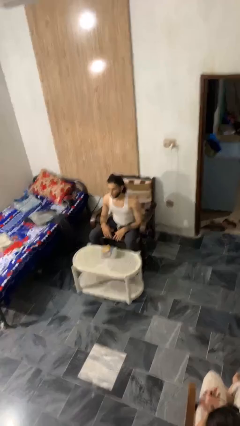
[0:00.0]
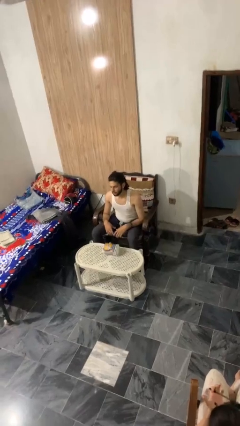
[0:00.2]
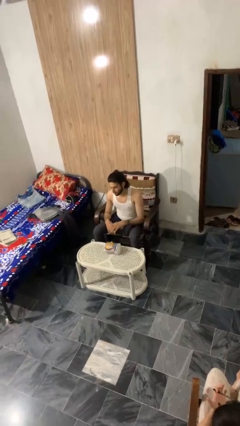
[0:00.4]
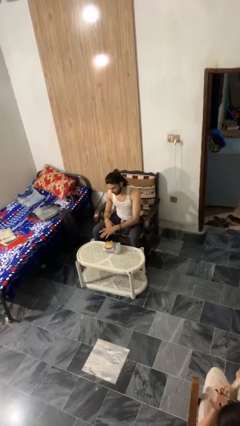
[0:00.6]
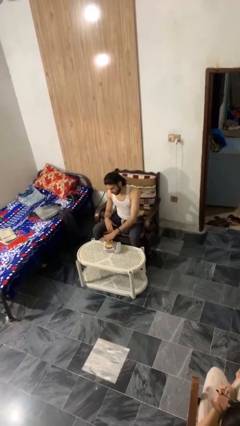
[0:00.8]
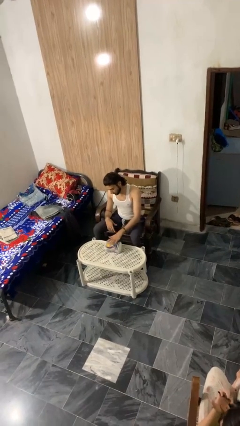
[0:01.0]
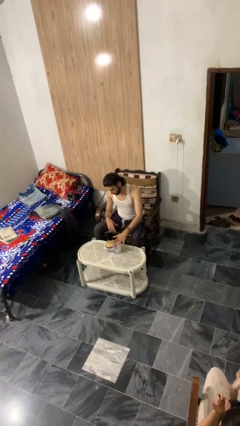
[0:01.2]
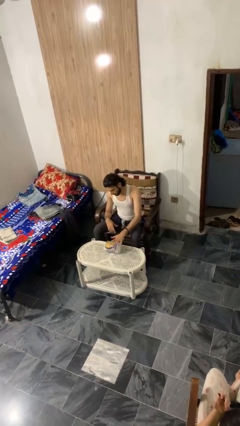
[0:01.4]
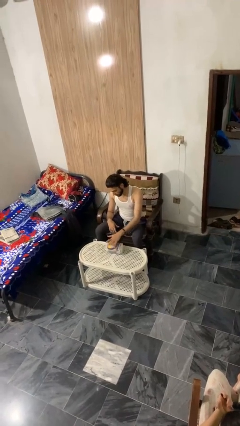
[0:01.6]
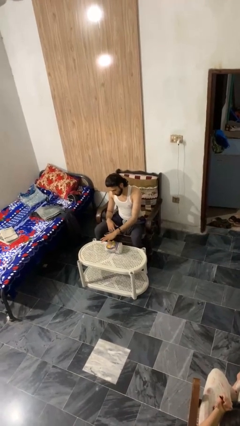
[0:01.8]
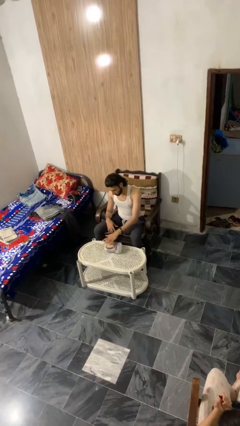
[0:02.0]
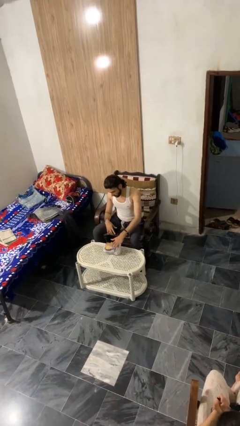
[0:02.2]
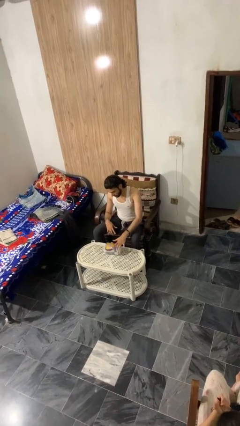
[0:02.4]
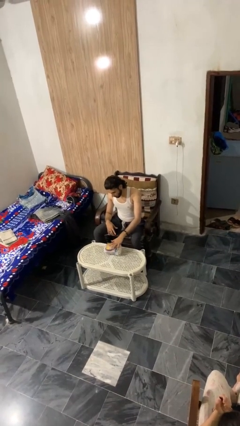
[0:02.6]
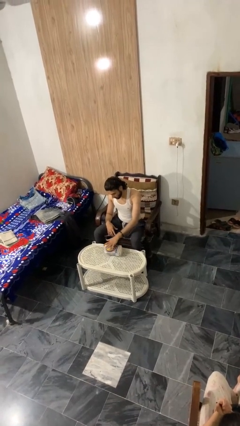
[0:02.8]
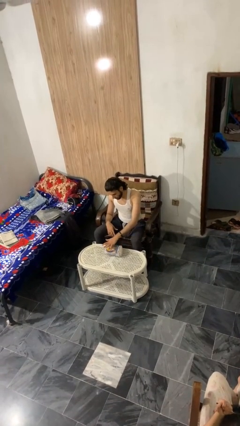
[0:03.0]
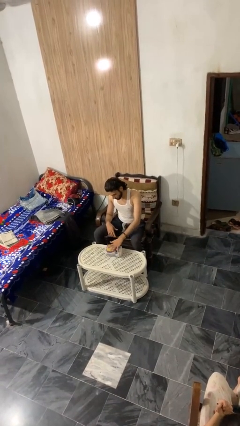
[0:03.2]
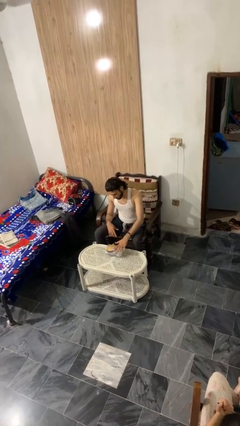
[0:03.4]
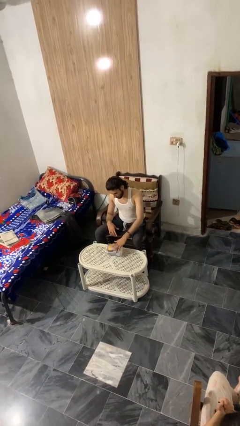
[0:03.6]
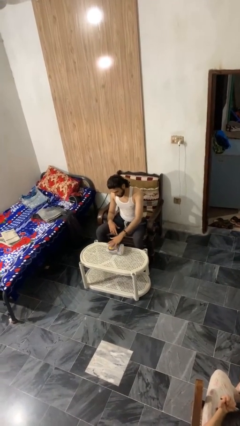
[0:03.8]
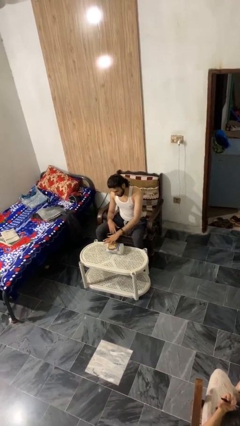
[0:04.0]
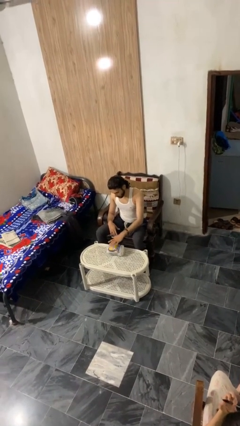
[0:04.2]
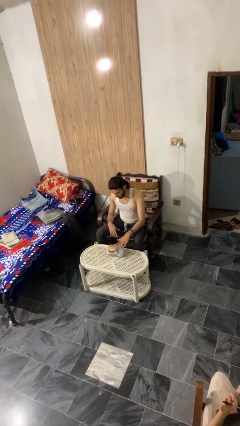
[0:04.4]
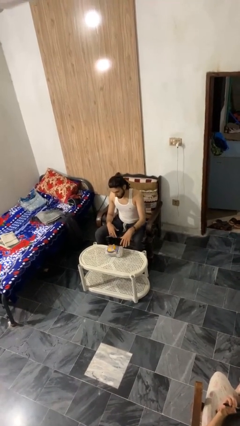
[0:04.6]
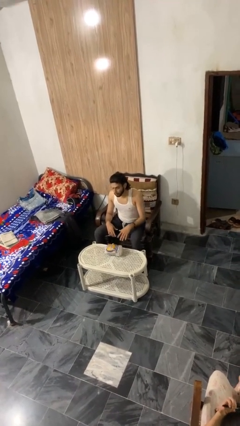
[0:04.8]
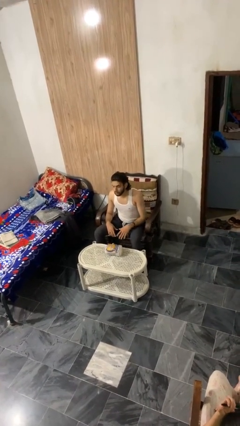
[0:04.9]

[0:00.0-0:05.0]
person waves hand over object

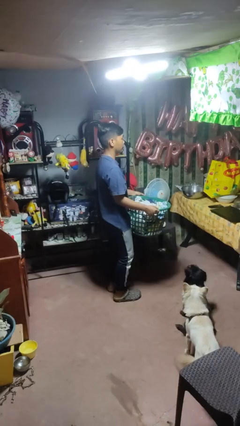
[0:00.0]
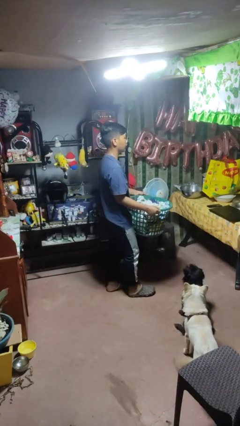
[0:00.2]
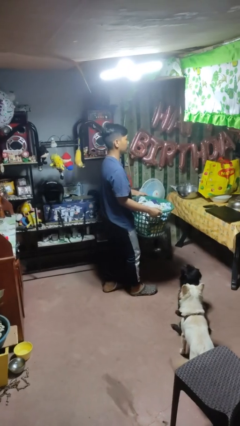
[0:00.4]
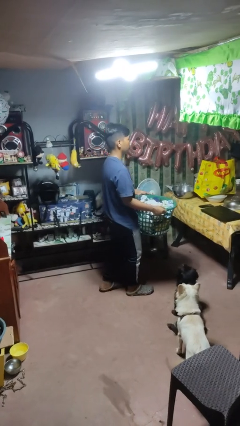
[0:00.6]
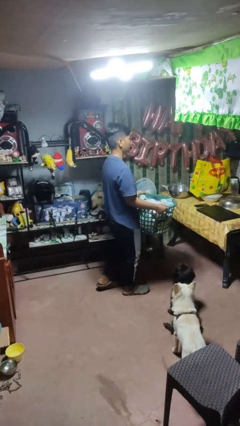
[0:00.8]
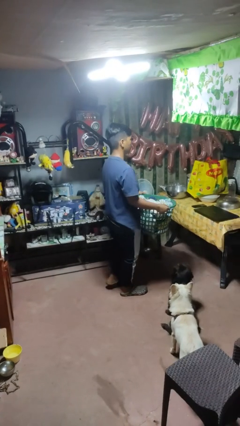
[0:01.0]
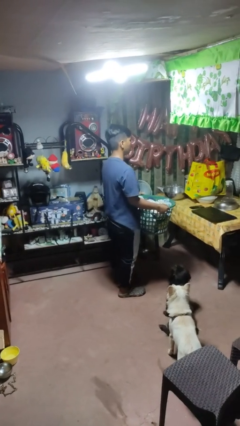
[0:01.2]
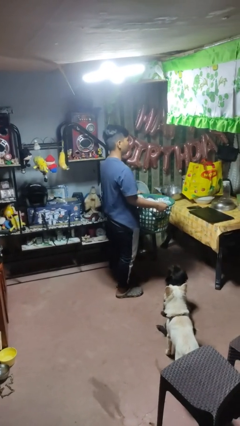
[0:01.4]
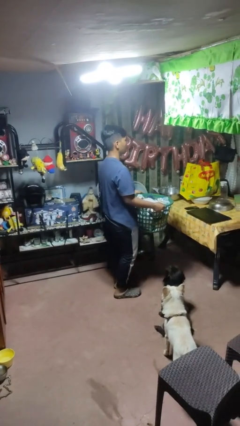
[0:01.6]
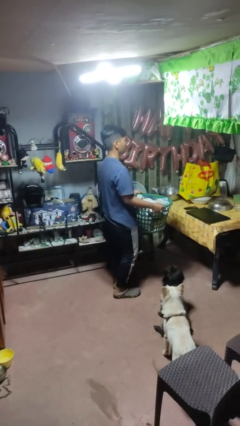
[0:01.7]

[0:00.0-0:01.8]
person carries laundry basket

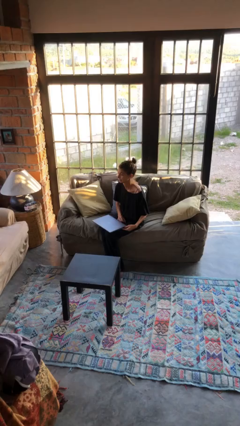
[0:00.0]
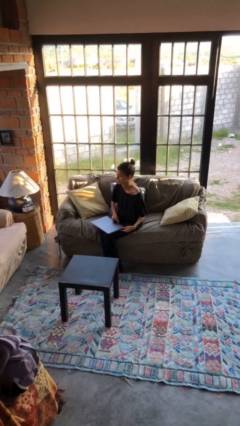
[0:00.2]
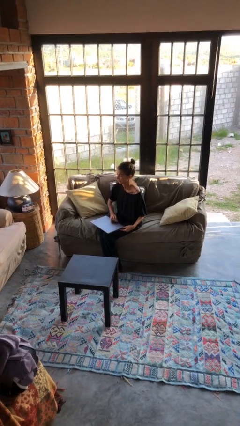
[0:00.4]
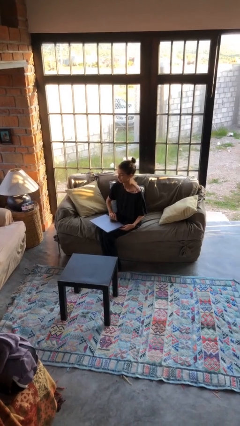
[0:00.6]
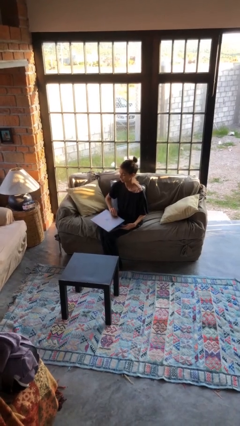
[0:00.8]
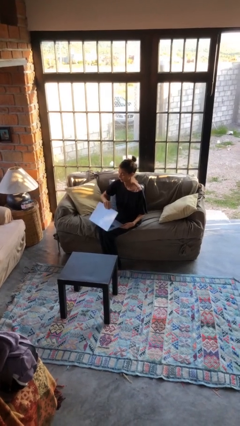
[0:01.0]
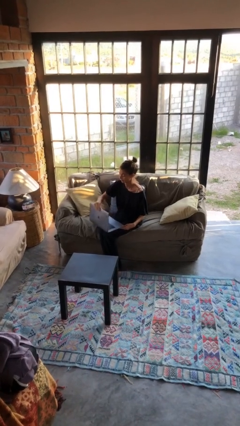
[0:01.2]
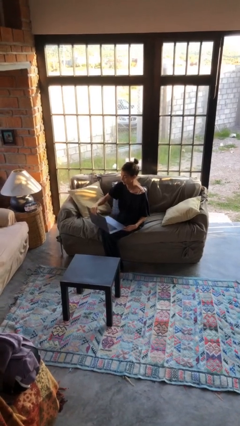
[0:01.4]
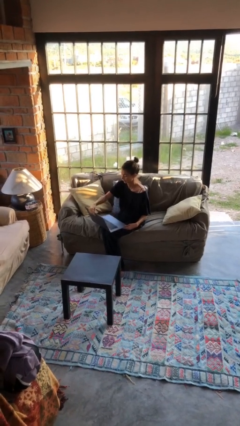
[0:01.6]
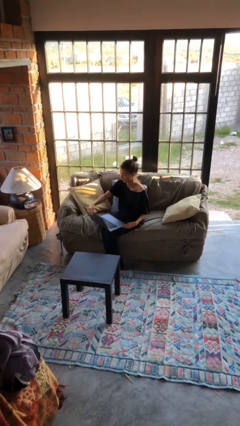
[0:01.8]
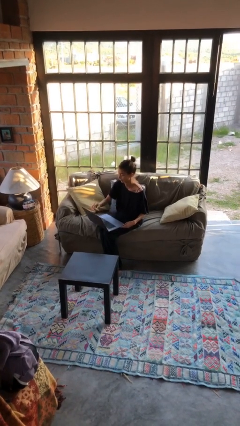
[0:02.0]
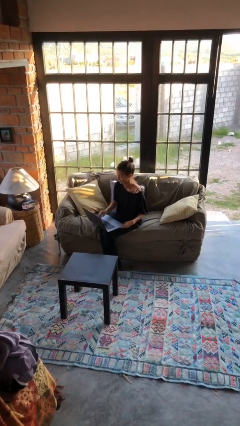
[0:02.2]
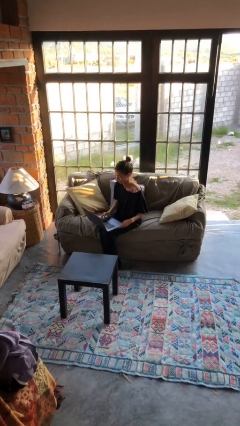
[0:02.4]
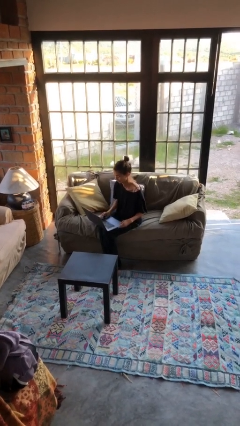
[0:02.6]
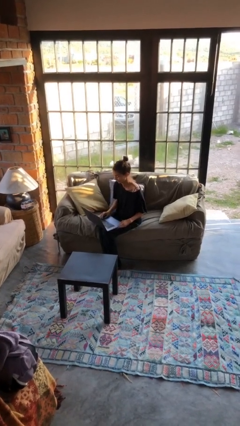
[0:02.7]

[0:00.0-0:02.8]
person opens laptop

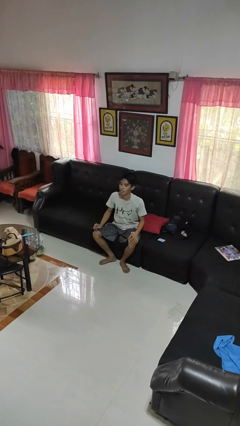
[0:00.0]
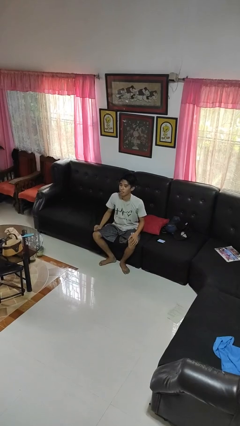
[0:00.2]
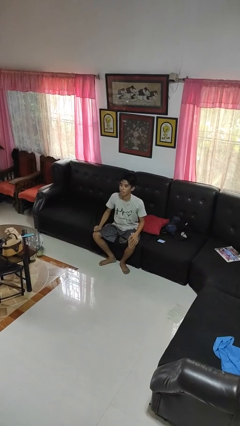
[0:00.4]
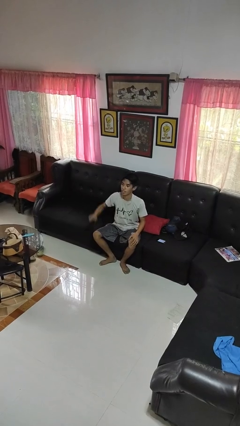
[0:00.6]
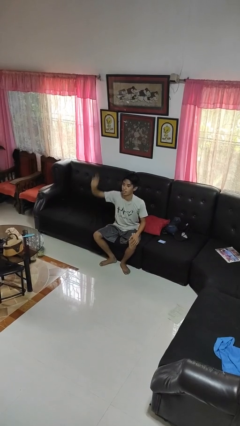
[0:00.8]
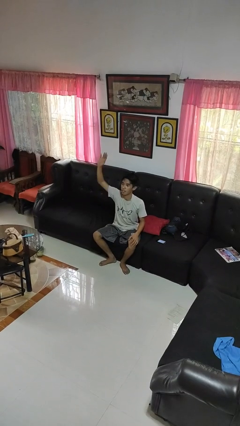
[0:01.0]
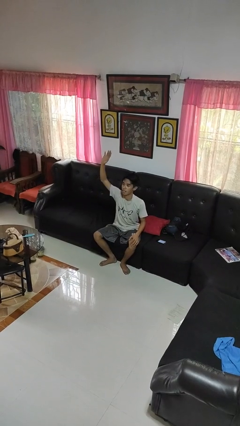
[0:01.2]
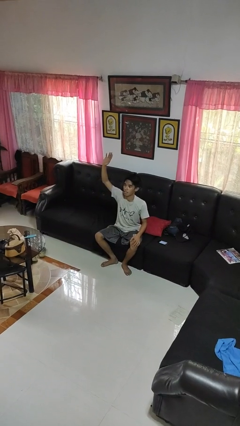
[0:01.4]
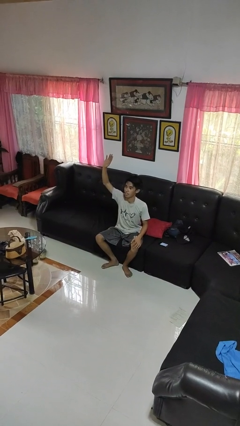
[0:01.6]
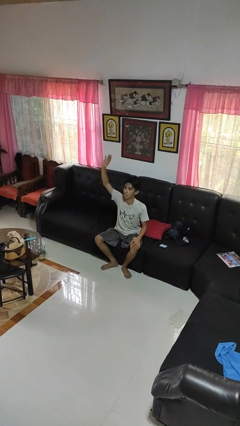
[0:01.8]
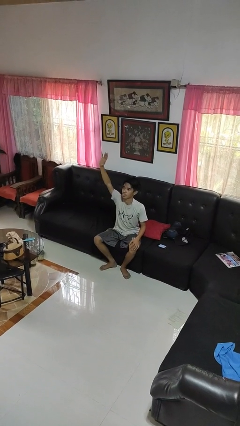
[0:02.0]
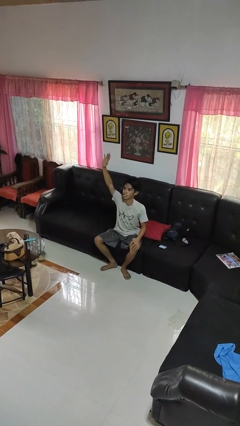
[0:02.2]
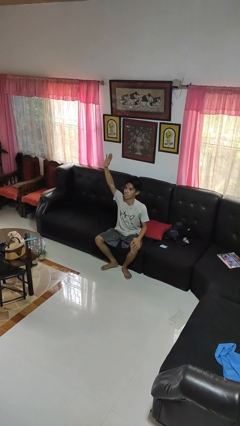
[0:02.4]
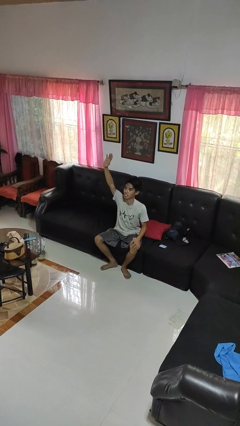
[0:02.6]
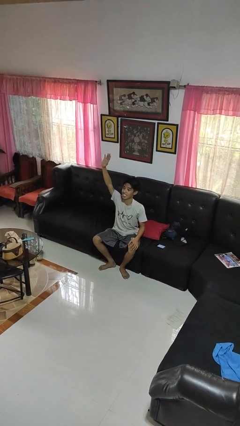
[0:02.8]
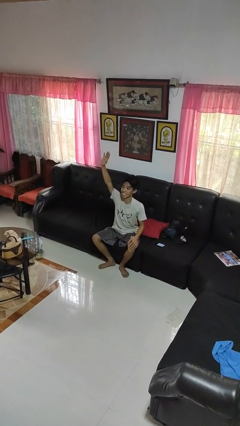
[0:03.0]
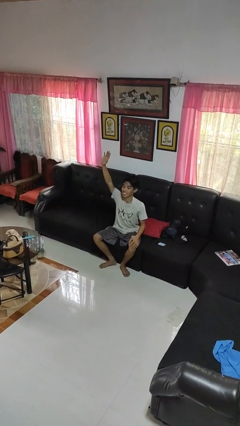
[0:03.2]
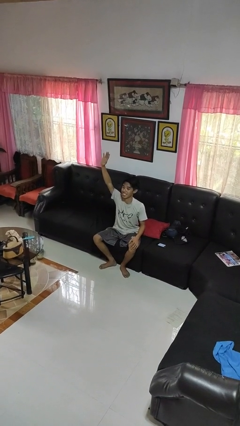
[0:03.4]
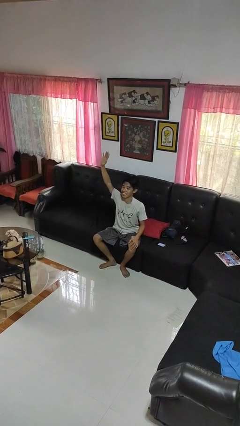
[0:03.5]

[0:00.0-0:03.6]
person gestures raise hand

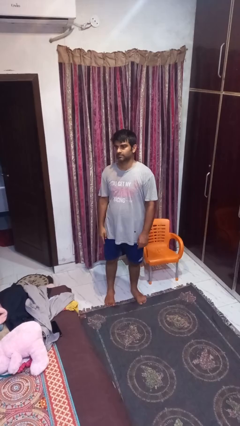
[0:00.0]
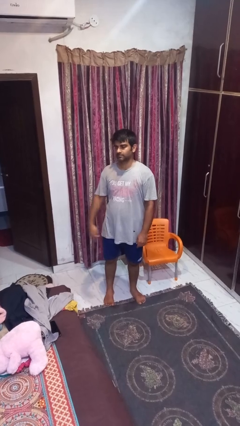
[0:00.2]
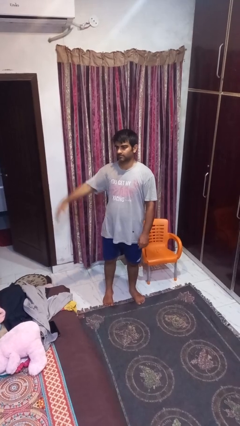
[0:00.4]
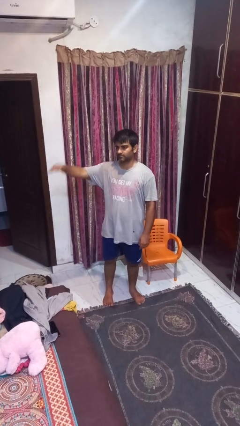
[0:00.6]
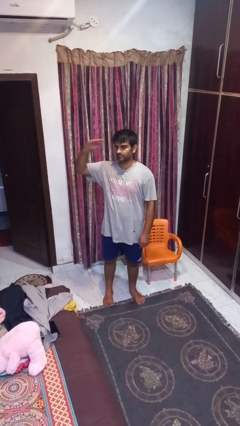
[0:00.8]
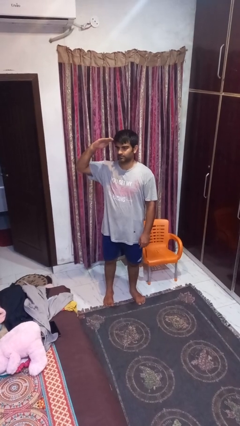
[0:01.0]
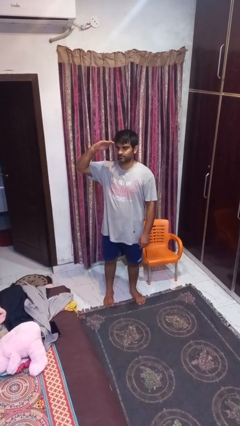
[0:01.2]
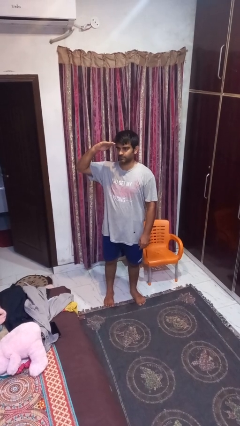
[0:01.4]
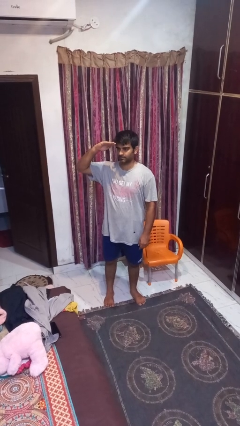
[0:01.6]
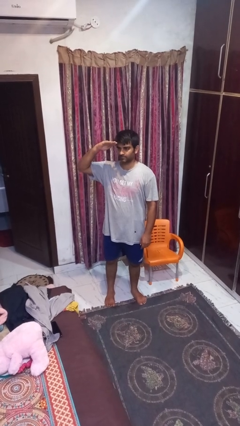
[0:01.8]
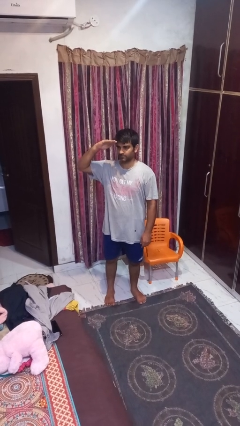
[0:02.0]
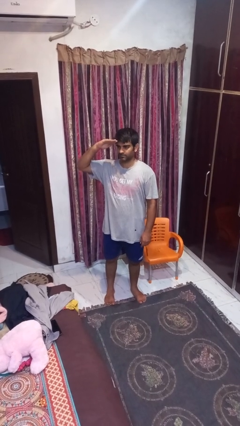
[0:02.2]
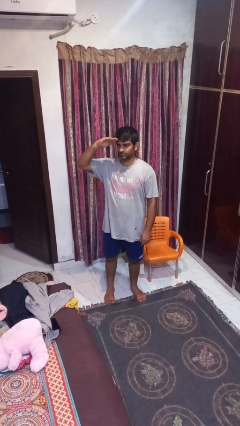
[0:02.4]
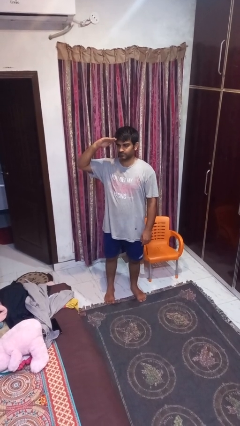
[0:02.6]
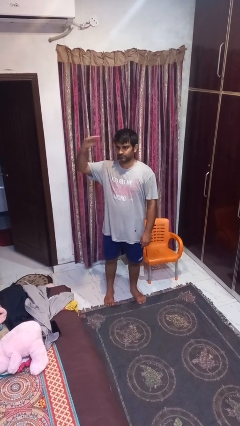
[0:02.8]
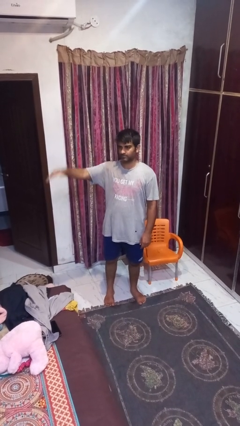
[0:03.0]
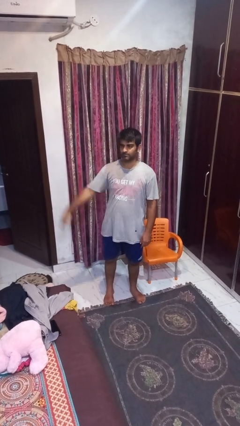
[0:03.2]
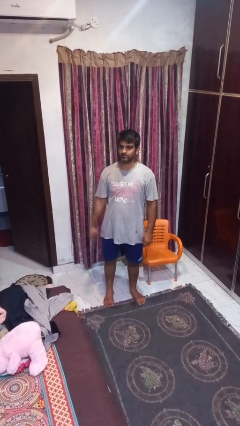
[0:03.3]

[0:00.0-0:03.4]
person salutes

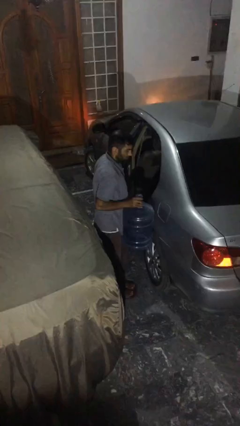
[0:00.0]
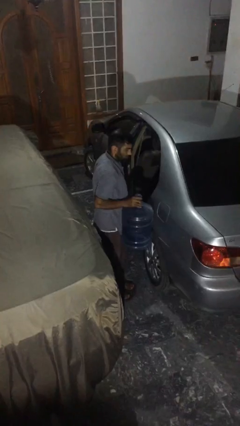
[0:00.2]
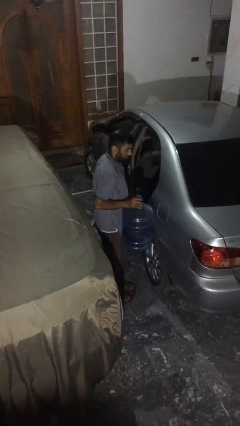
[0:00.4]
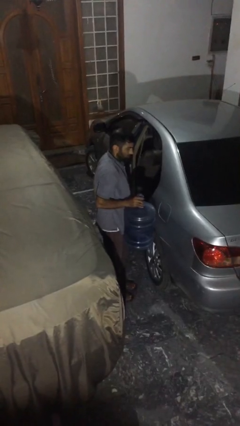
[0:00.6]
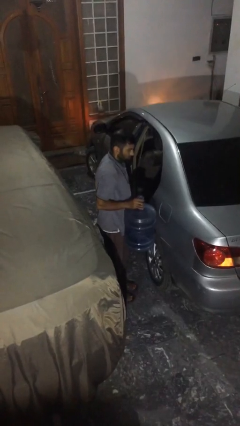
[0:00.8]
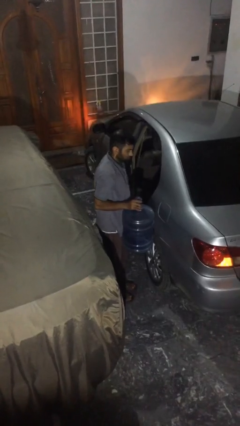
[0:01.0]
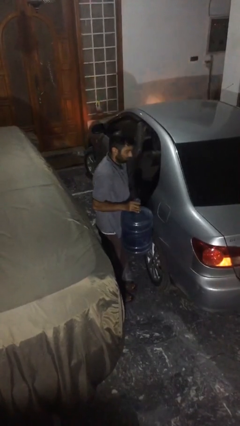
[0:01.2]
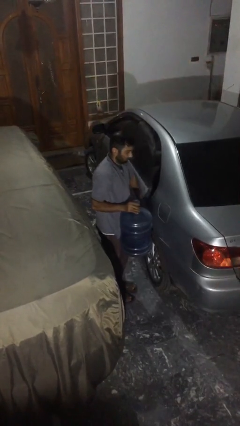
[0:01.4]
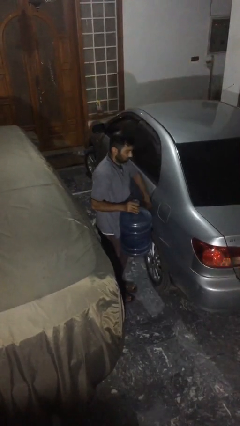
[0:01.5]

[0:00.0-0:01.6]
person closes car door
